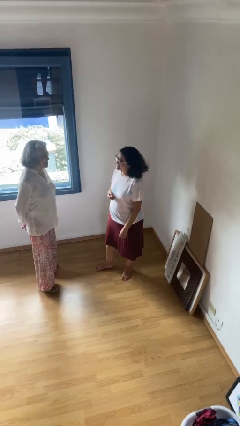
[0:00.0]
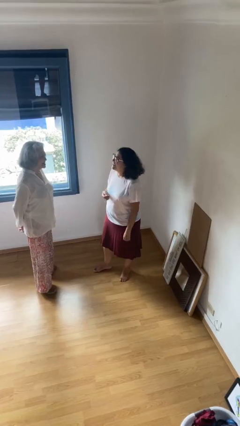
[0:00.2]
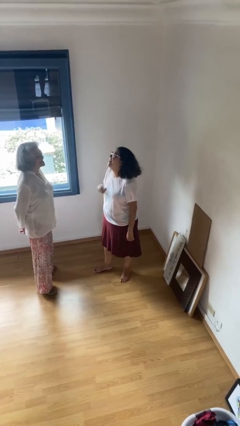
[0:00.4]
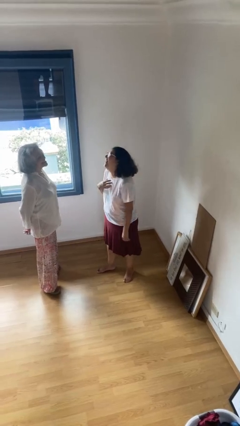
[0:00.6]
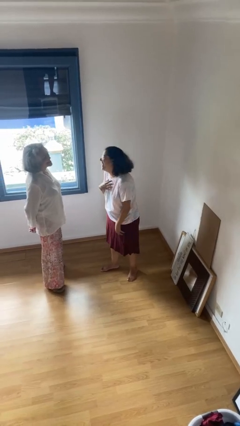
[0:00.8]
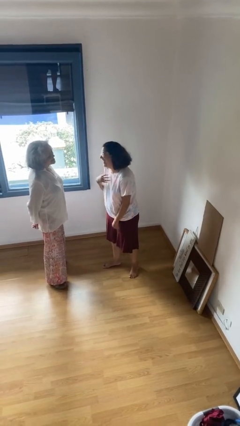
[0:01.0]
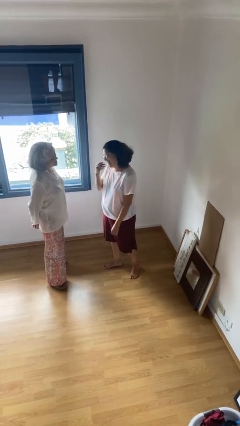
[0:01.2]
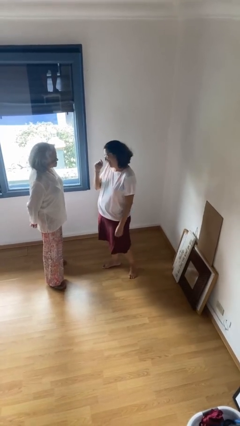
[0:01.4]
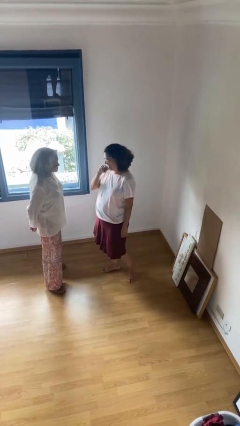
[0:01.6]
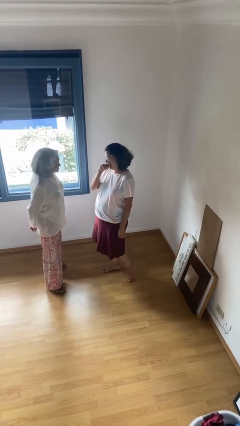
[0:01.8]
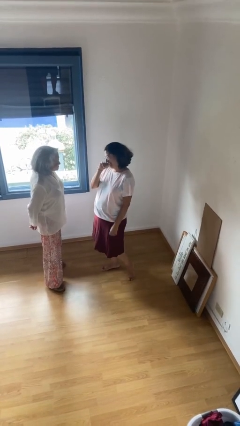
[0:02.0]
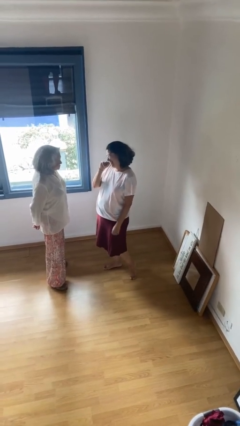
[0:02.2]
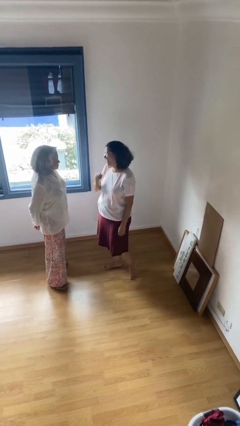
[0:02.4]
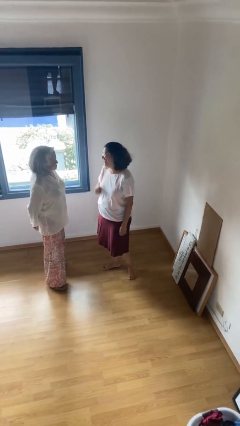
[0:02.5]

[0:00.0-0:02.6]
person laughs with person

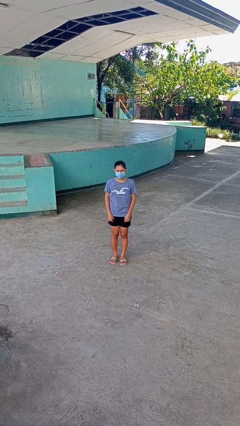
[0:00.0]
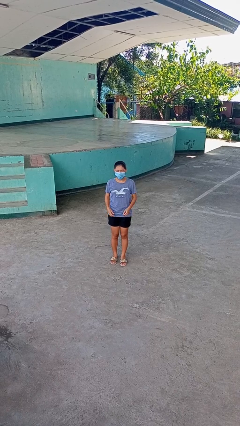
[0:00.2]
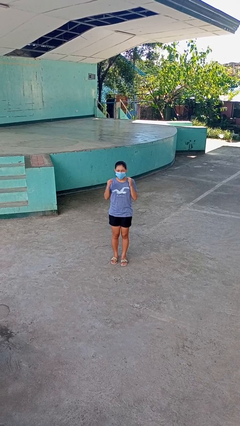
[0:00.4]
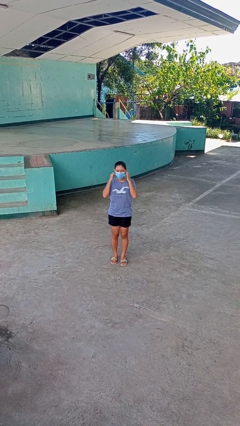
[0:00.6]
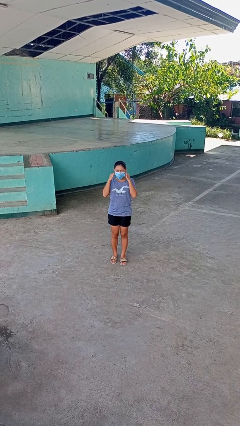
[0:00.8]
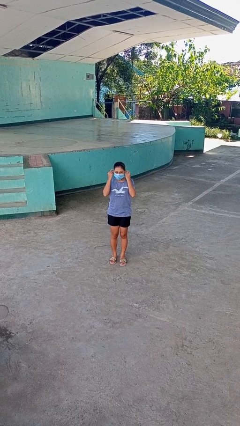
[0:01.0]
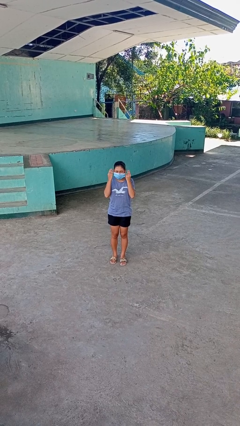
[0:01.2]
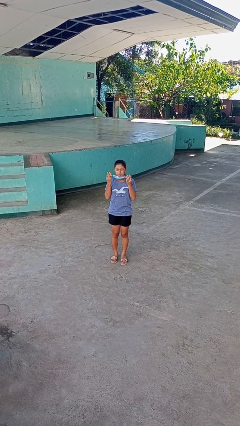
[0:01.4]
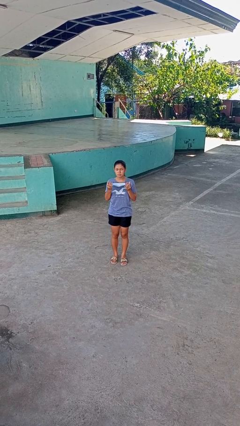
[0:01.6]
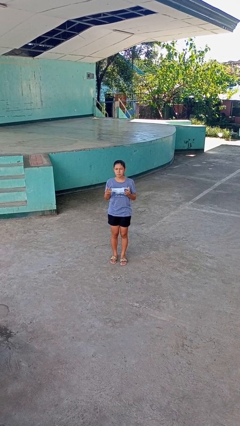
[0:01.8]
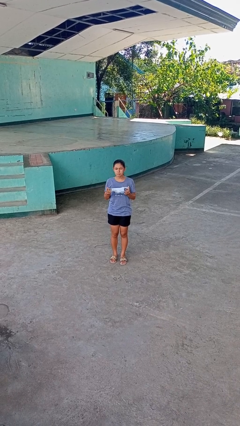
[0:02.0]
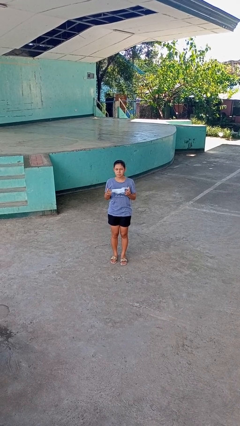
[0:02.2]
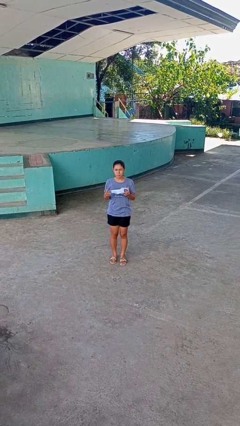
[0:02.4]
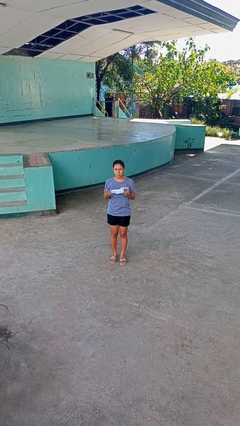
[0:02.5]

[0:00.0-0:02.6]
person takes off facemask

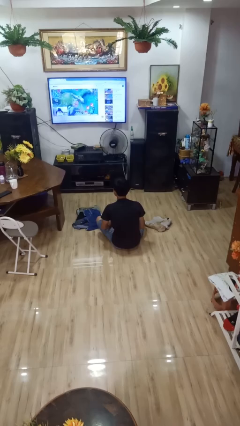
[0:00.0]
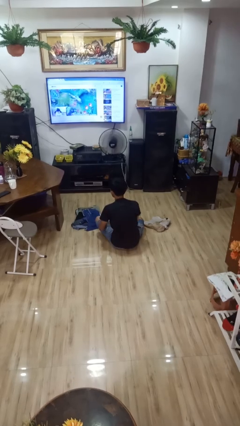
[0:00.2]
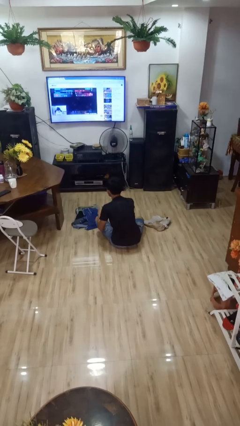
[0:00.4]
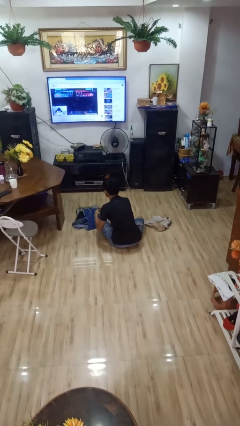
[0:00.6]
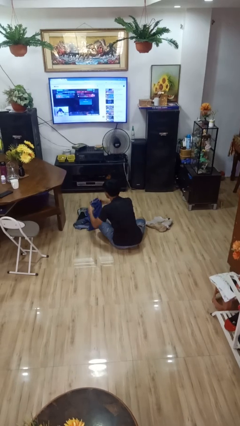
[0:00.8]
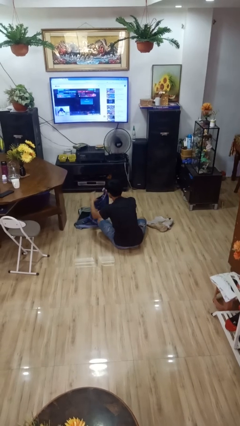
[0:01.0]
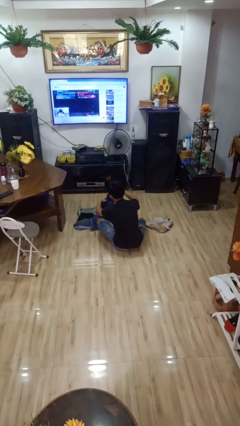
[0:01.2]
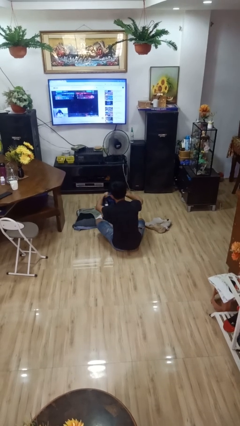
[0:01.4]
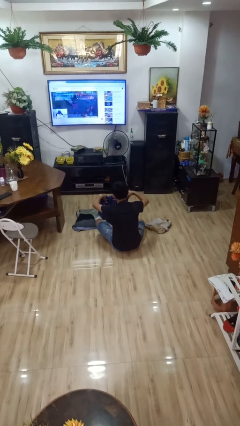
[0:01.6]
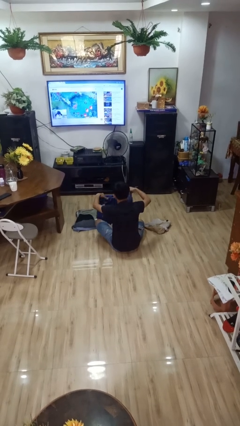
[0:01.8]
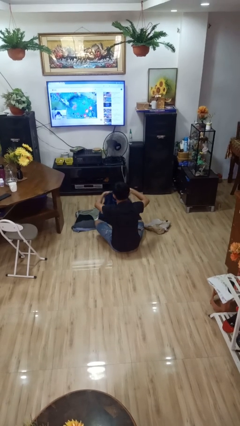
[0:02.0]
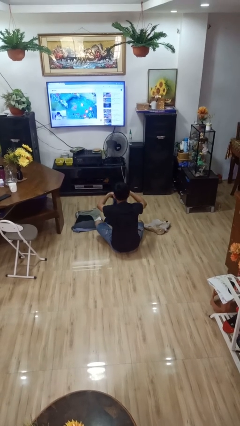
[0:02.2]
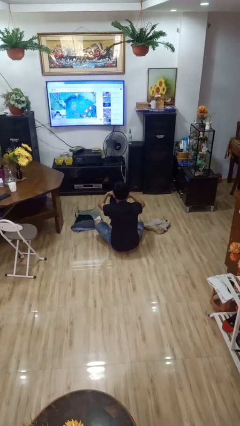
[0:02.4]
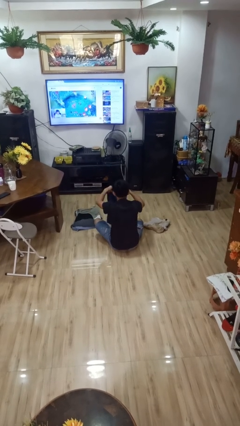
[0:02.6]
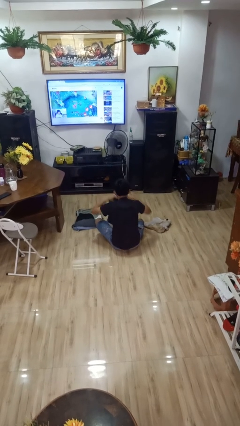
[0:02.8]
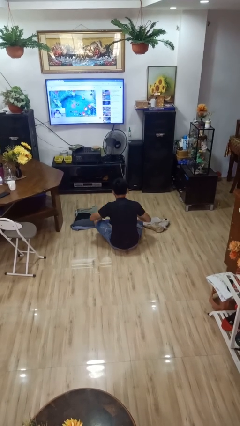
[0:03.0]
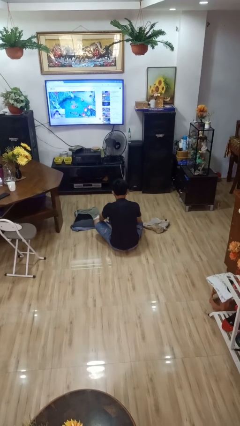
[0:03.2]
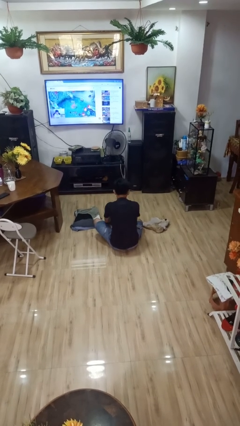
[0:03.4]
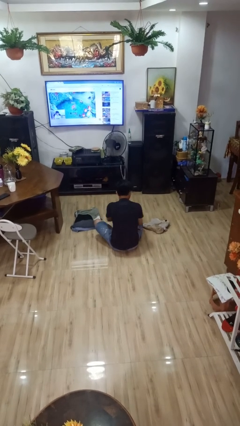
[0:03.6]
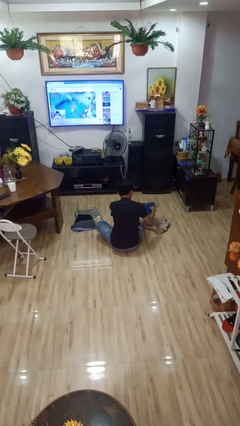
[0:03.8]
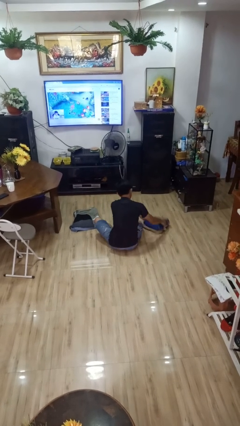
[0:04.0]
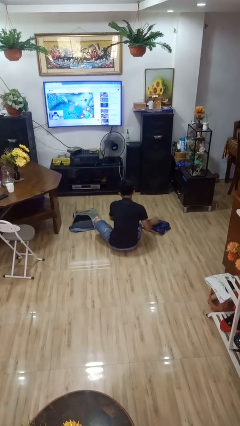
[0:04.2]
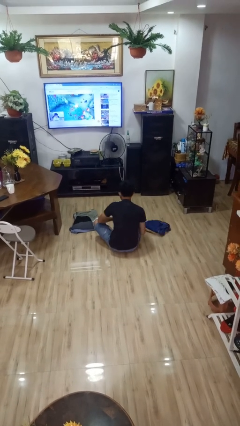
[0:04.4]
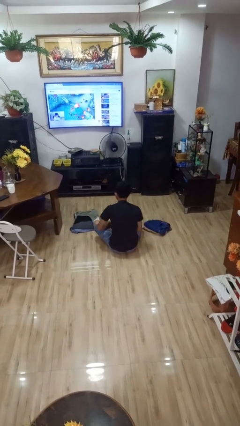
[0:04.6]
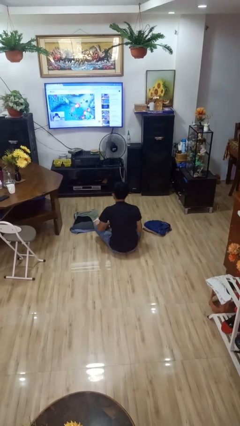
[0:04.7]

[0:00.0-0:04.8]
person folds pants

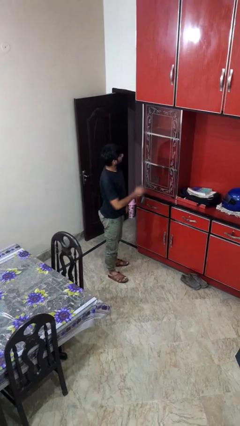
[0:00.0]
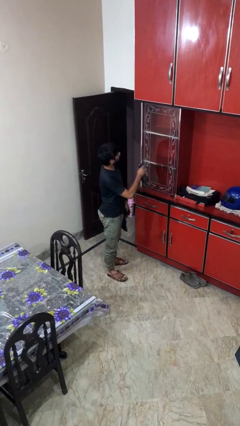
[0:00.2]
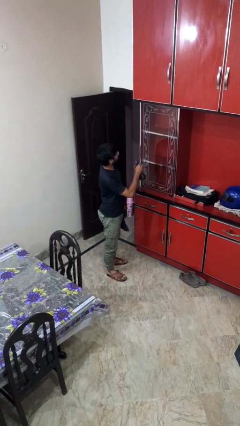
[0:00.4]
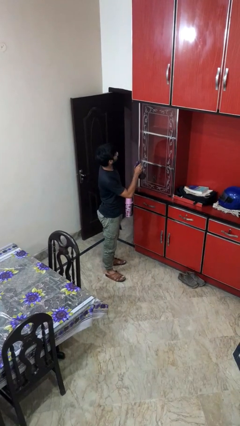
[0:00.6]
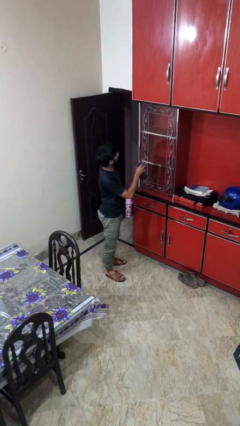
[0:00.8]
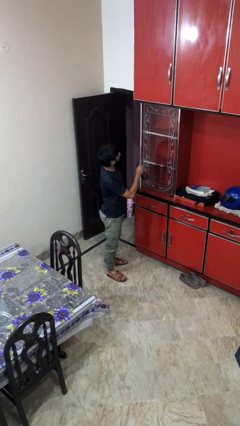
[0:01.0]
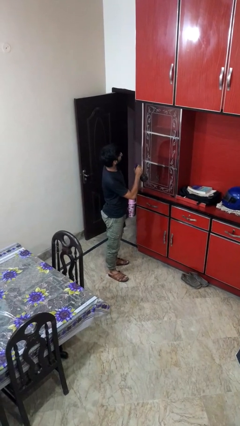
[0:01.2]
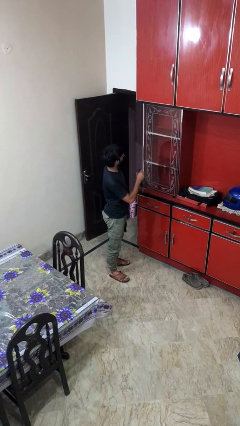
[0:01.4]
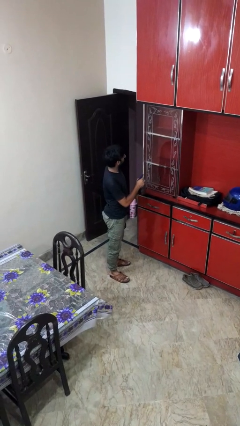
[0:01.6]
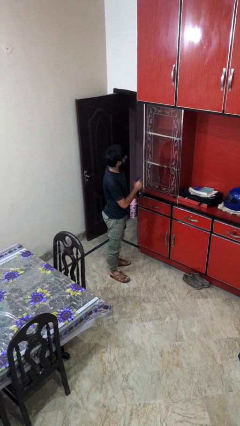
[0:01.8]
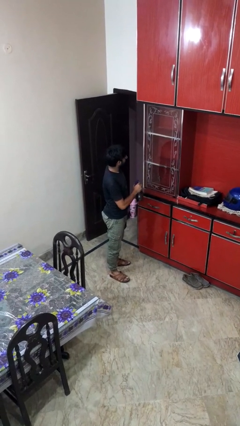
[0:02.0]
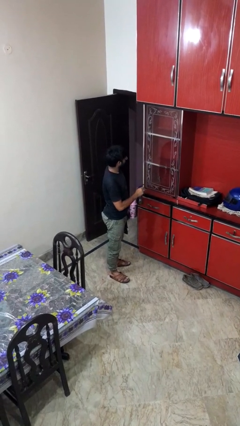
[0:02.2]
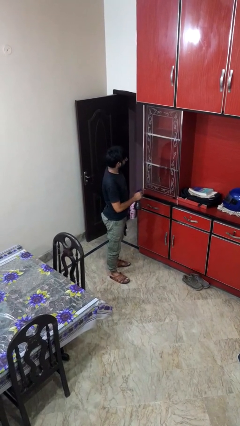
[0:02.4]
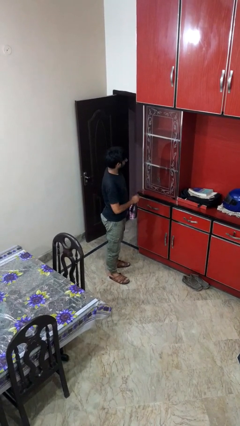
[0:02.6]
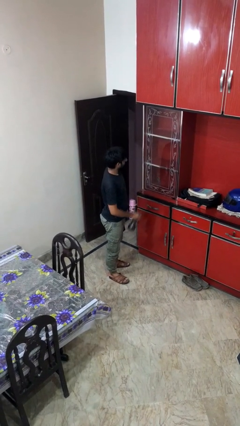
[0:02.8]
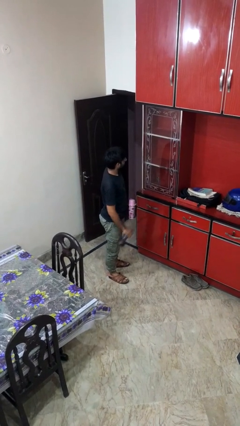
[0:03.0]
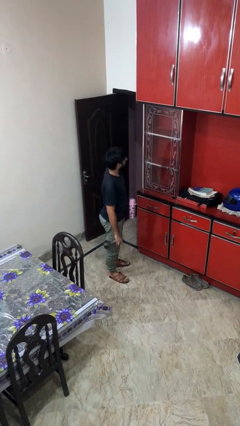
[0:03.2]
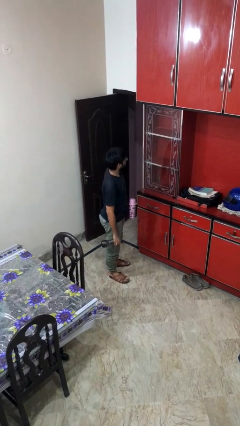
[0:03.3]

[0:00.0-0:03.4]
person sprays from bottle

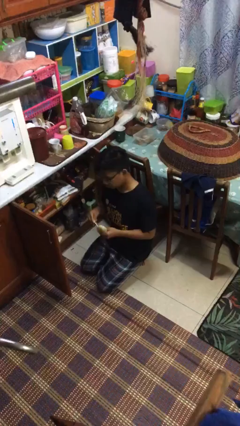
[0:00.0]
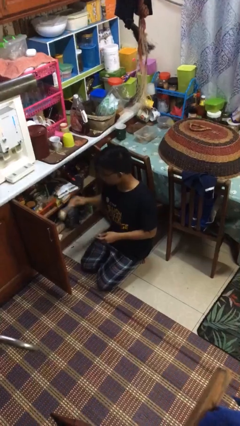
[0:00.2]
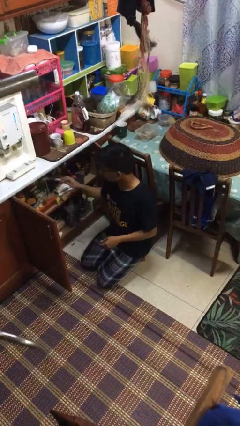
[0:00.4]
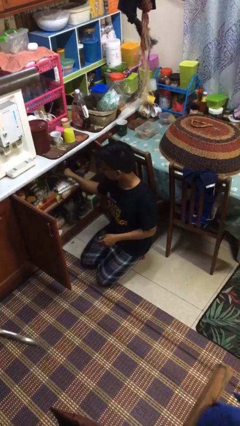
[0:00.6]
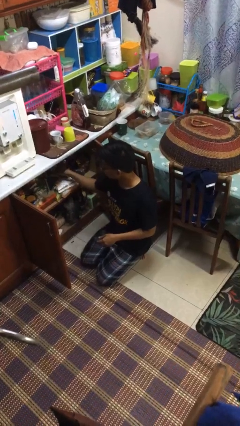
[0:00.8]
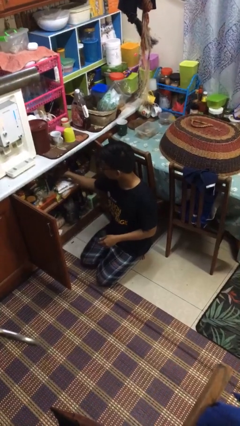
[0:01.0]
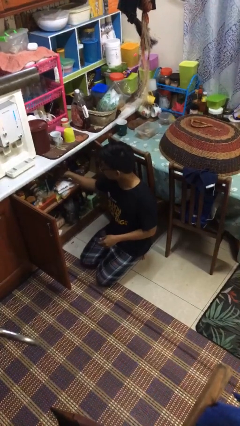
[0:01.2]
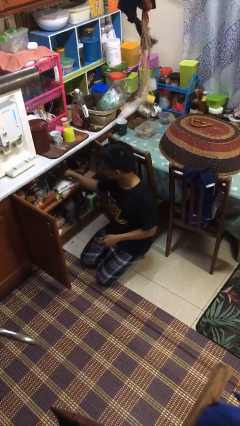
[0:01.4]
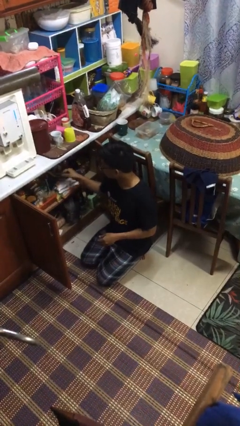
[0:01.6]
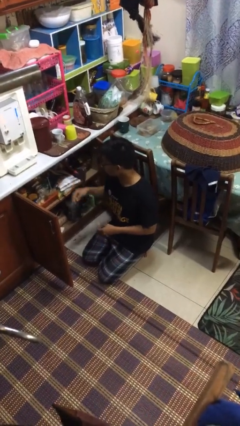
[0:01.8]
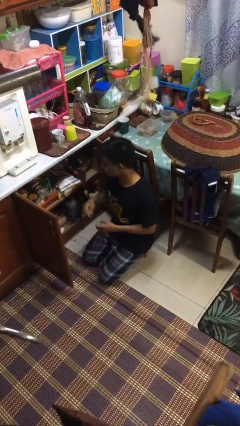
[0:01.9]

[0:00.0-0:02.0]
person puts object into kitchen drawer

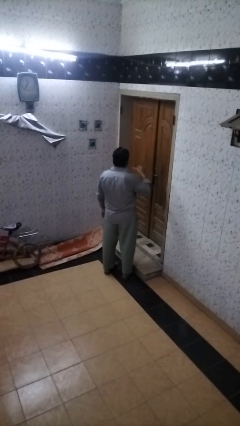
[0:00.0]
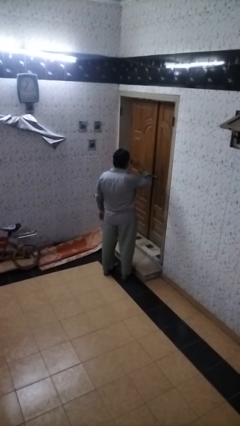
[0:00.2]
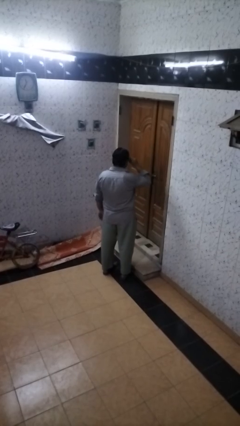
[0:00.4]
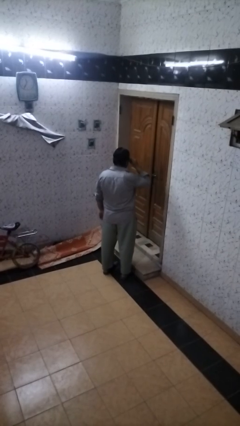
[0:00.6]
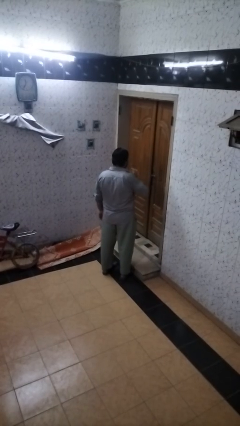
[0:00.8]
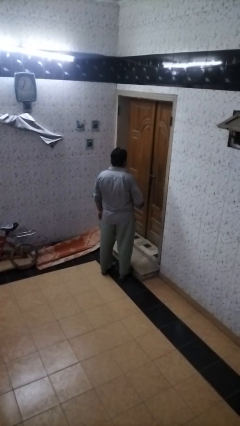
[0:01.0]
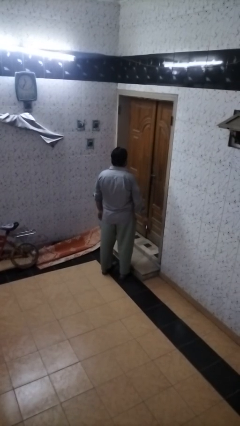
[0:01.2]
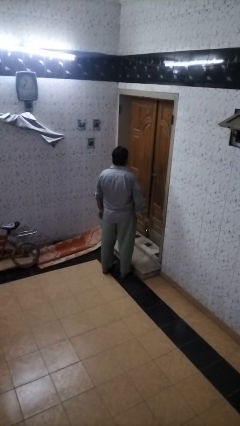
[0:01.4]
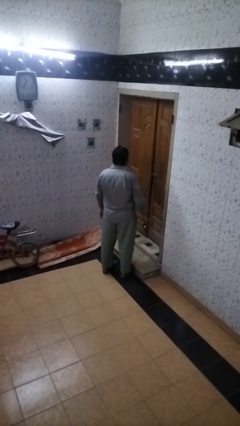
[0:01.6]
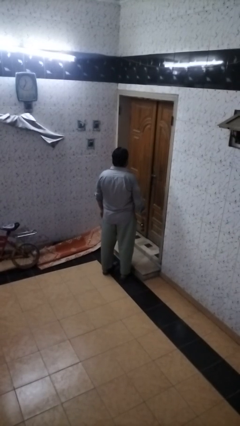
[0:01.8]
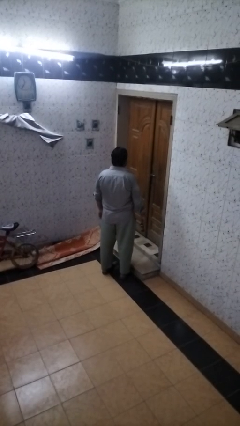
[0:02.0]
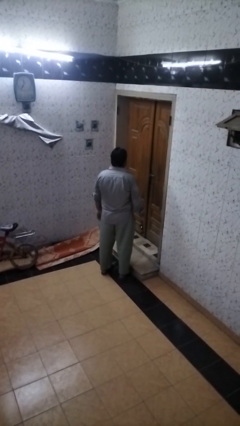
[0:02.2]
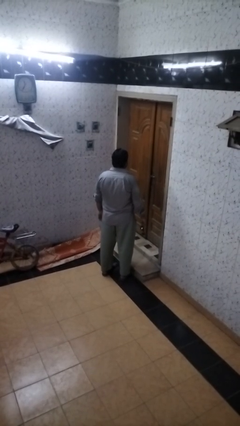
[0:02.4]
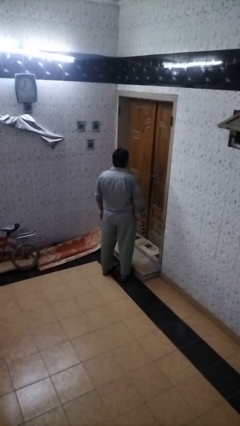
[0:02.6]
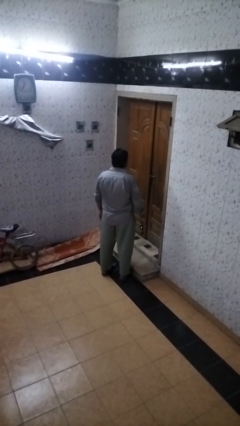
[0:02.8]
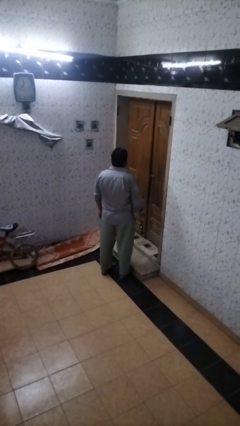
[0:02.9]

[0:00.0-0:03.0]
person takes off sunglasses
